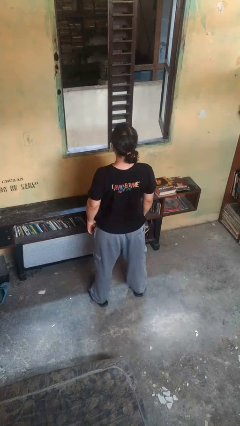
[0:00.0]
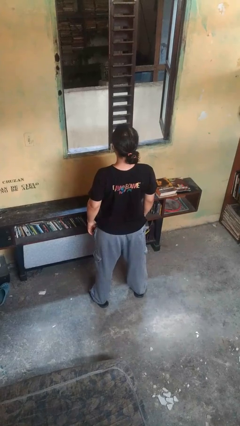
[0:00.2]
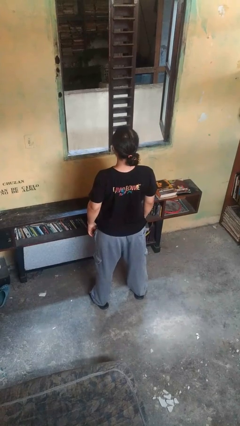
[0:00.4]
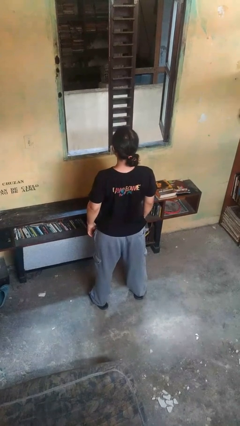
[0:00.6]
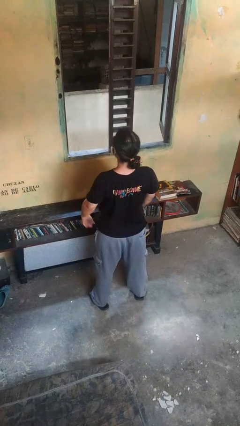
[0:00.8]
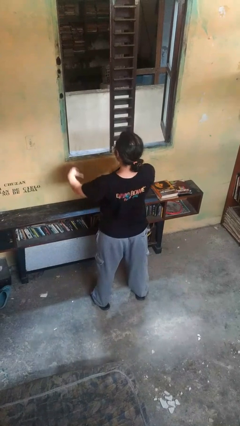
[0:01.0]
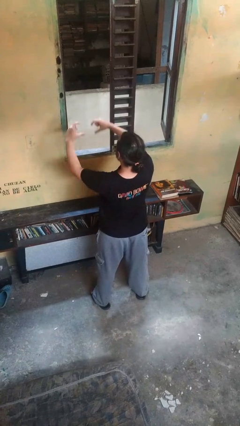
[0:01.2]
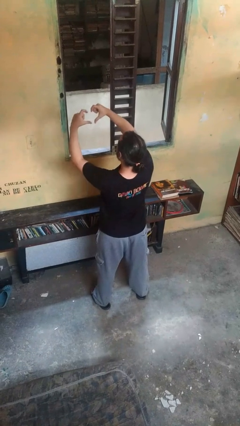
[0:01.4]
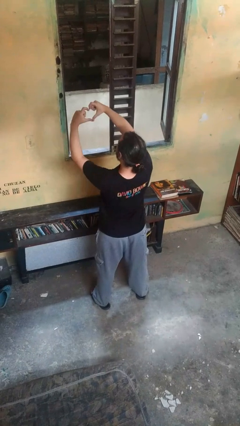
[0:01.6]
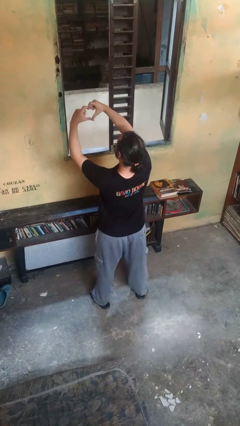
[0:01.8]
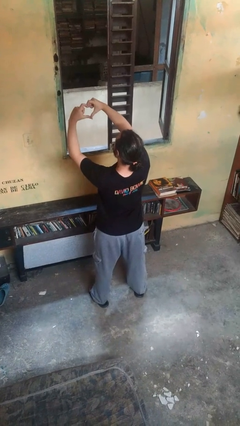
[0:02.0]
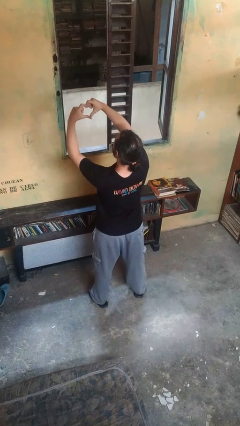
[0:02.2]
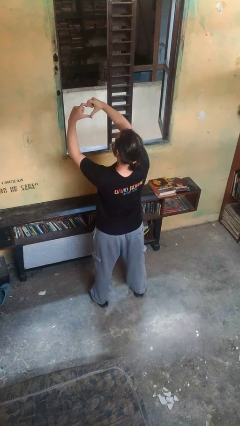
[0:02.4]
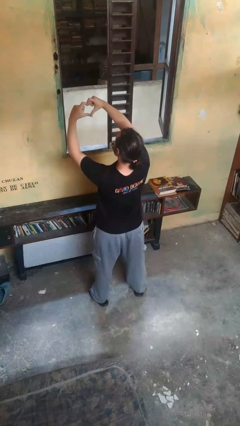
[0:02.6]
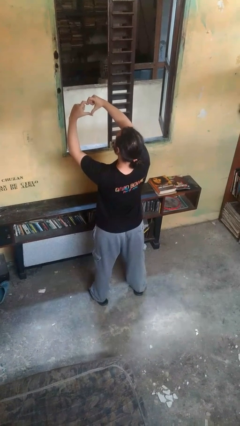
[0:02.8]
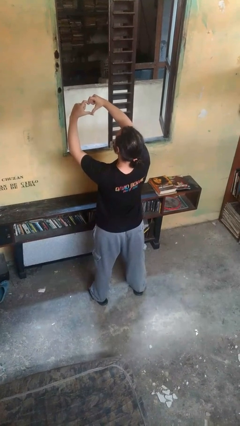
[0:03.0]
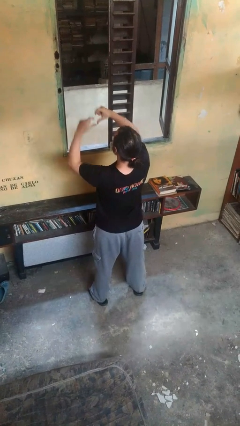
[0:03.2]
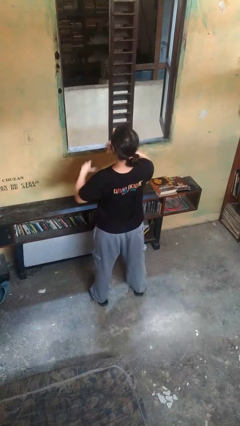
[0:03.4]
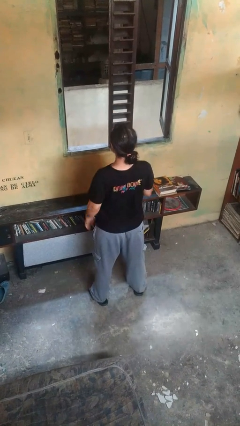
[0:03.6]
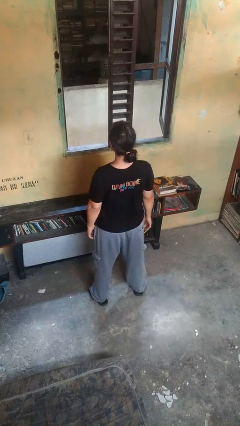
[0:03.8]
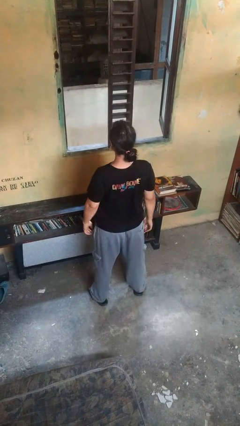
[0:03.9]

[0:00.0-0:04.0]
person gestures heart

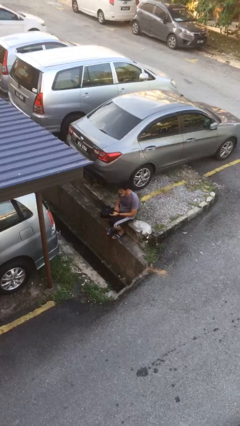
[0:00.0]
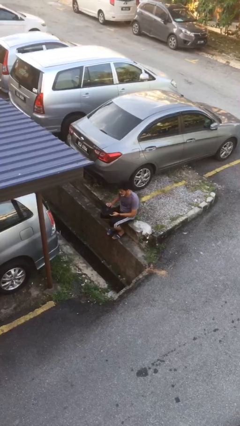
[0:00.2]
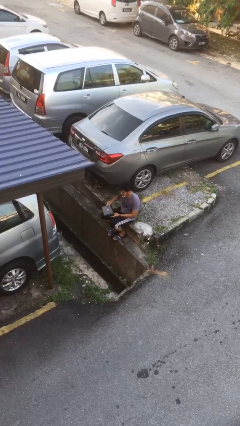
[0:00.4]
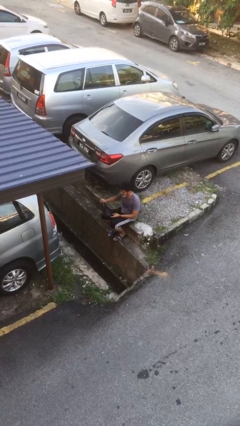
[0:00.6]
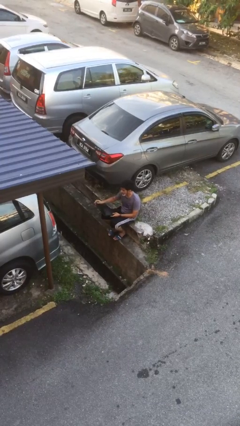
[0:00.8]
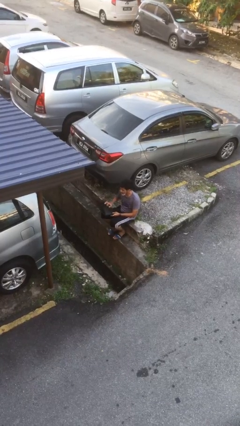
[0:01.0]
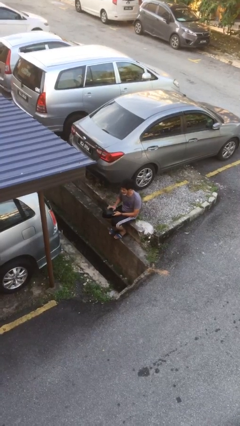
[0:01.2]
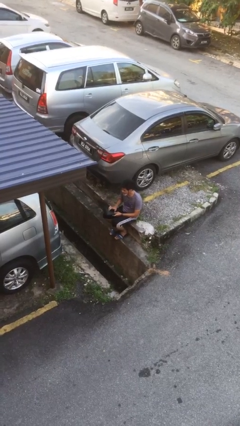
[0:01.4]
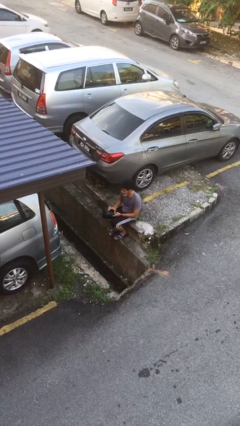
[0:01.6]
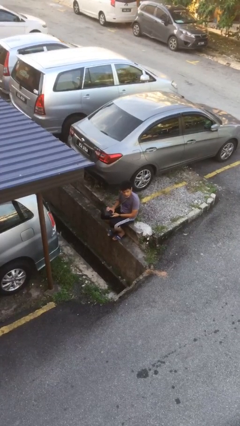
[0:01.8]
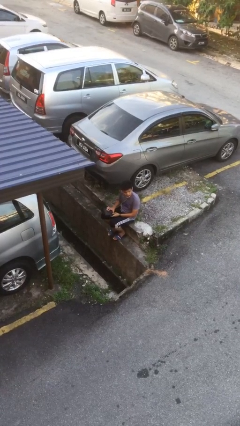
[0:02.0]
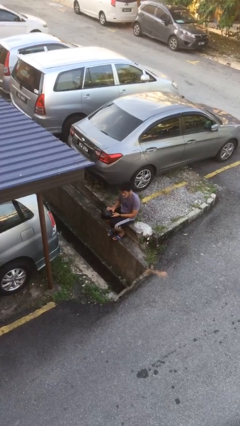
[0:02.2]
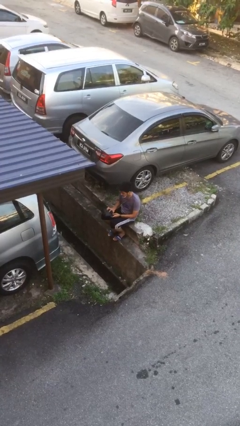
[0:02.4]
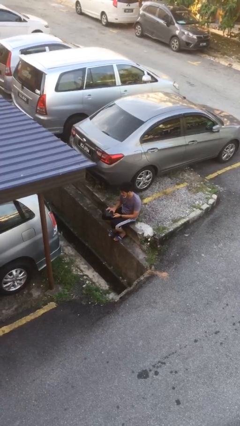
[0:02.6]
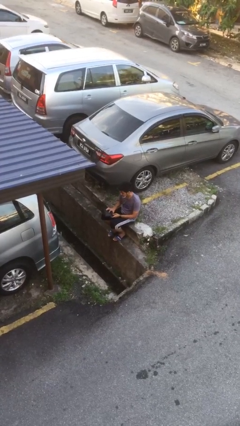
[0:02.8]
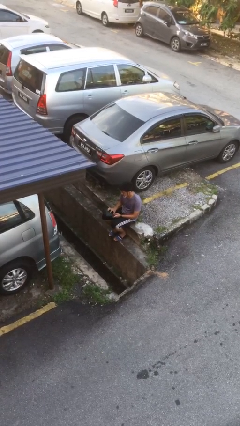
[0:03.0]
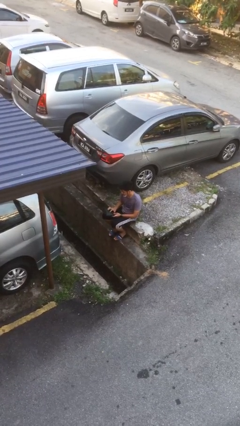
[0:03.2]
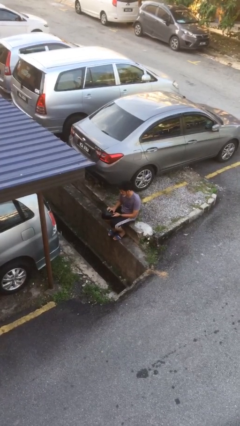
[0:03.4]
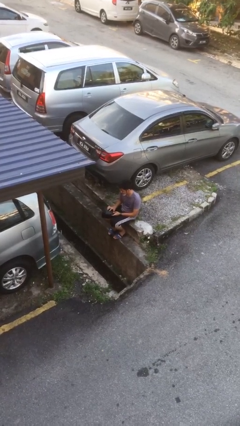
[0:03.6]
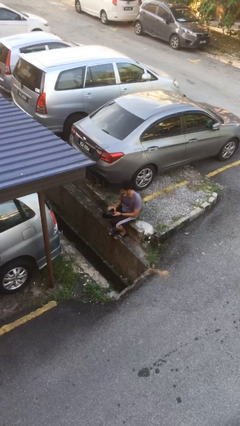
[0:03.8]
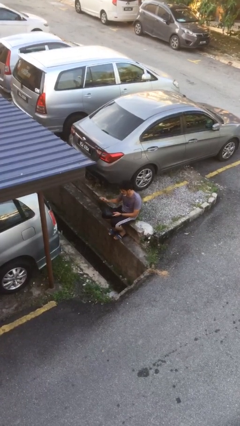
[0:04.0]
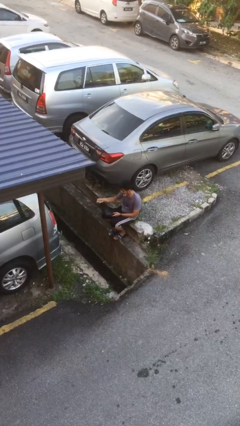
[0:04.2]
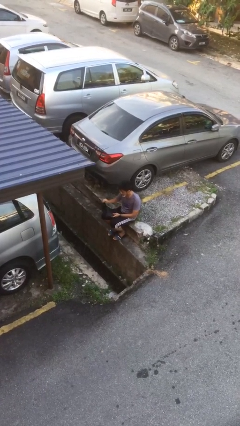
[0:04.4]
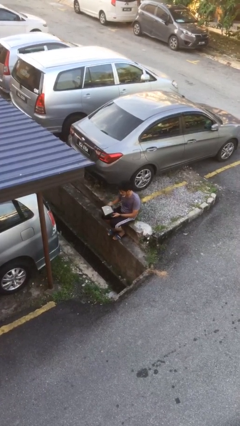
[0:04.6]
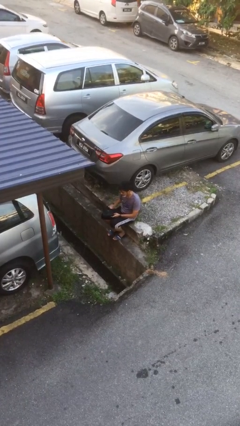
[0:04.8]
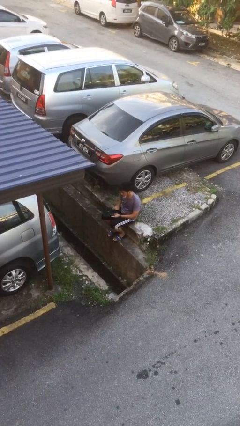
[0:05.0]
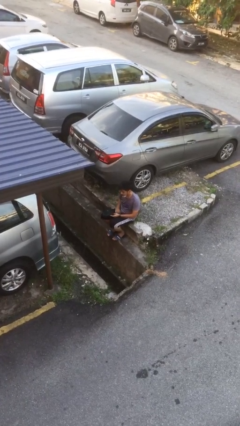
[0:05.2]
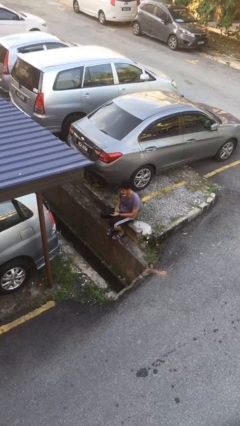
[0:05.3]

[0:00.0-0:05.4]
person interacts with laptop

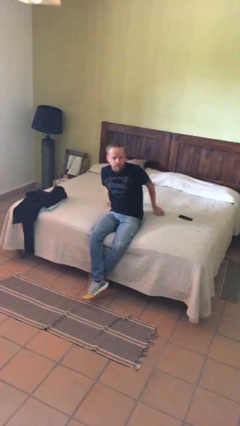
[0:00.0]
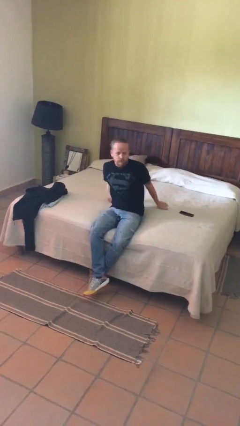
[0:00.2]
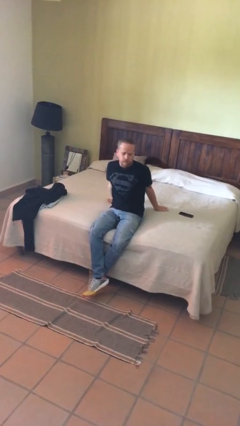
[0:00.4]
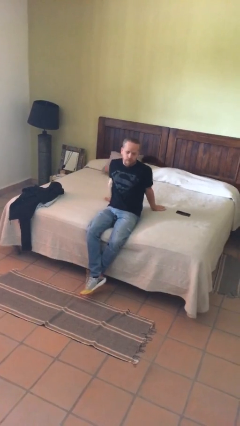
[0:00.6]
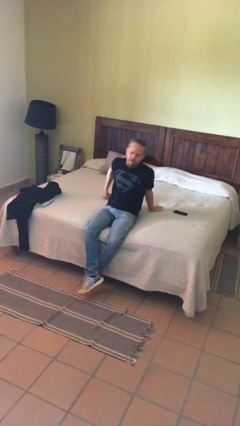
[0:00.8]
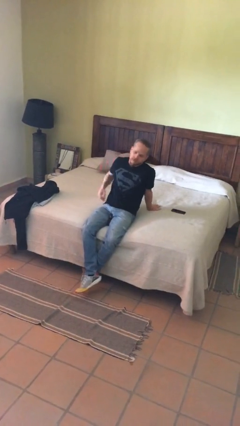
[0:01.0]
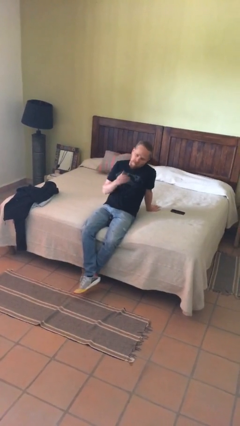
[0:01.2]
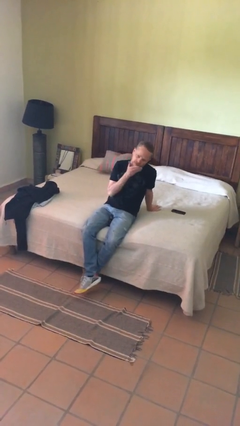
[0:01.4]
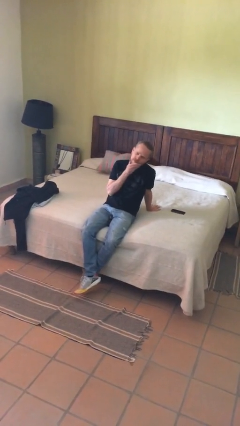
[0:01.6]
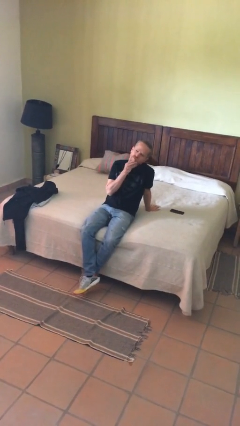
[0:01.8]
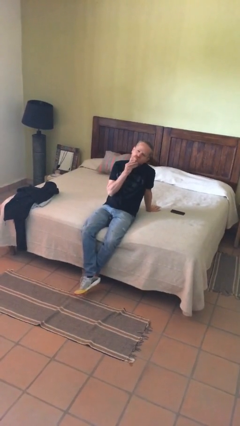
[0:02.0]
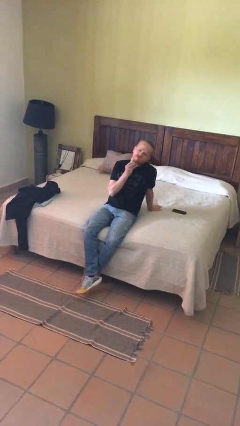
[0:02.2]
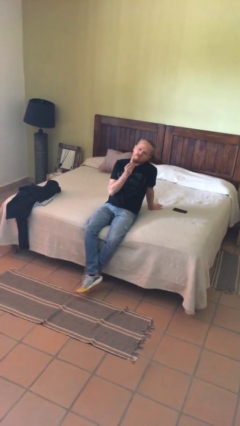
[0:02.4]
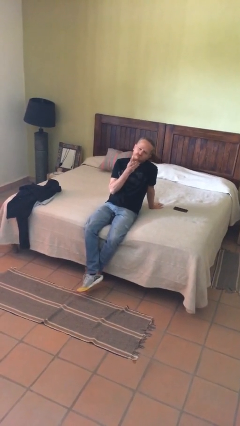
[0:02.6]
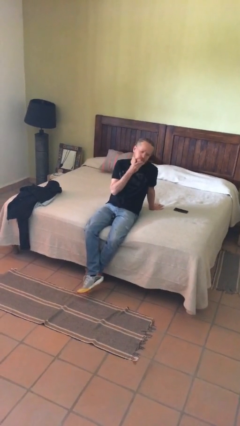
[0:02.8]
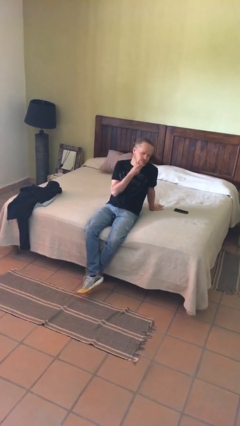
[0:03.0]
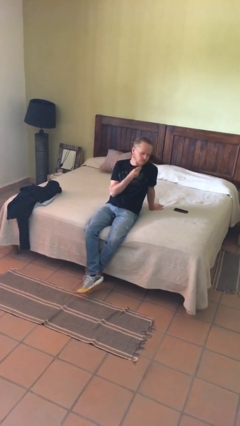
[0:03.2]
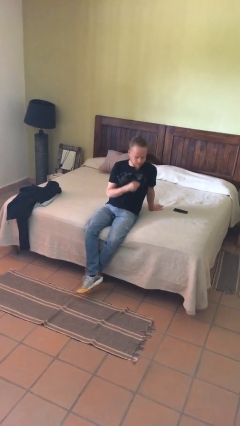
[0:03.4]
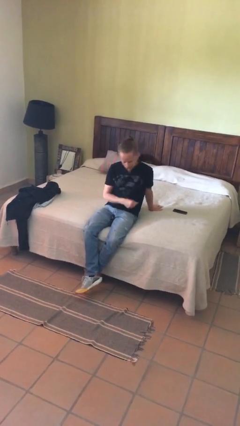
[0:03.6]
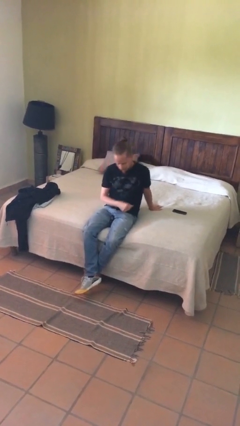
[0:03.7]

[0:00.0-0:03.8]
person strokes chin

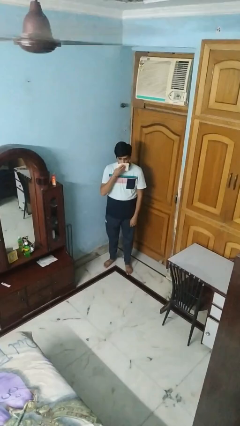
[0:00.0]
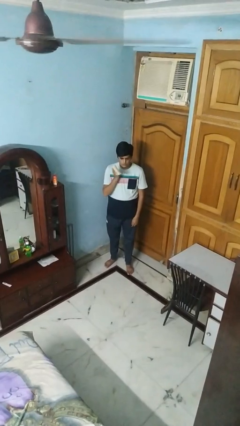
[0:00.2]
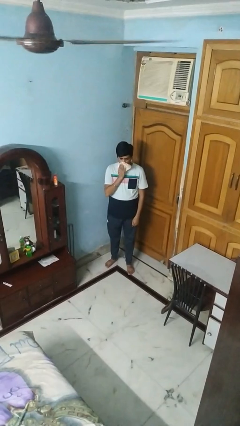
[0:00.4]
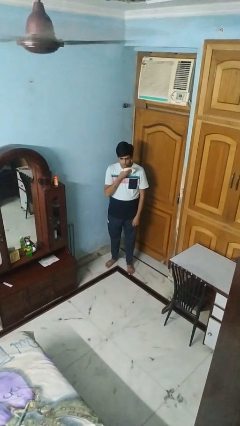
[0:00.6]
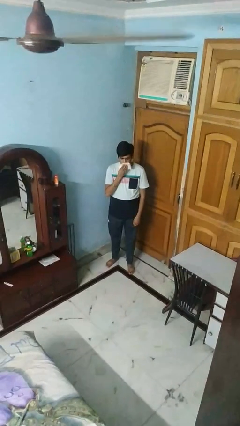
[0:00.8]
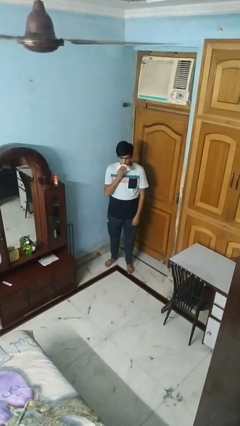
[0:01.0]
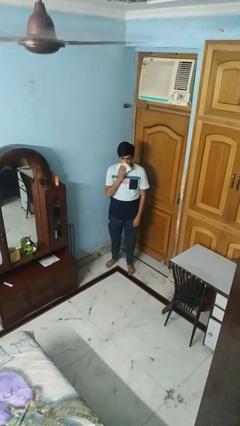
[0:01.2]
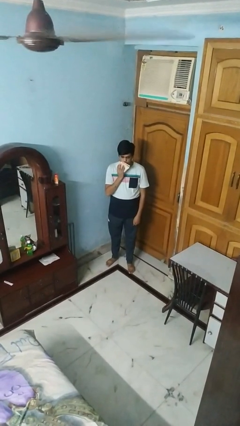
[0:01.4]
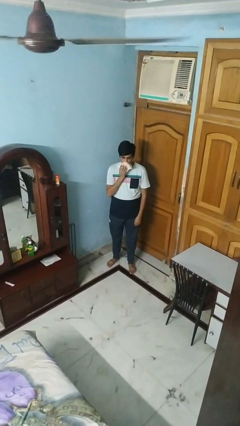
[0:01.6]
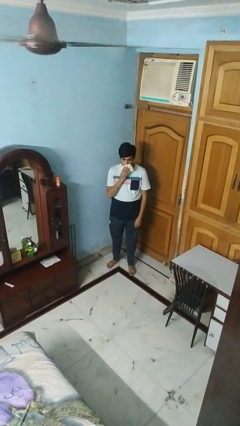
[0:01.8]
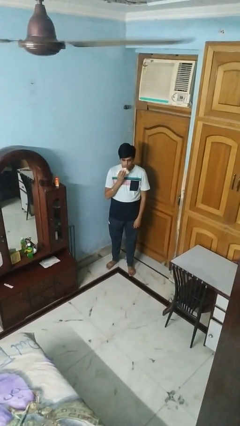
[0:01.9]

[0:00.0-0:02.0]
person wipes mouth with napkin

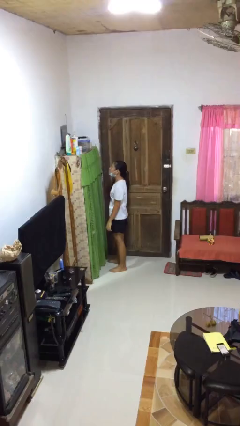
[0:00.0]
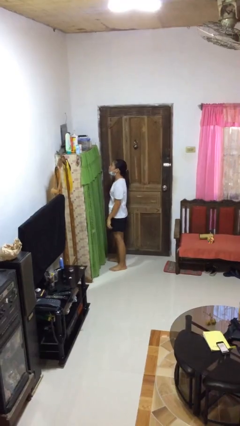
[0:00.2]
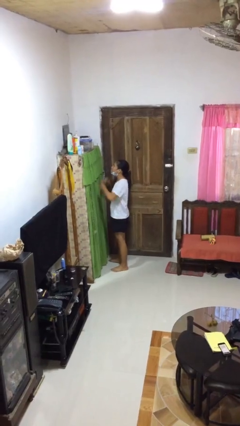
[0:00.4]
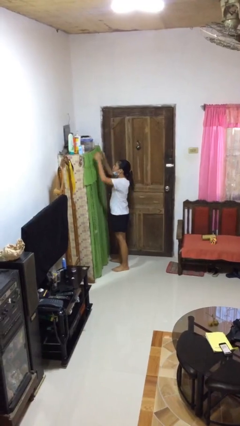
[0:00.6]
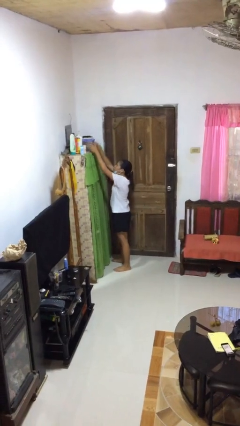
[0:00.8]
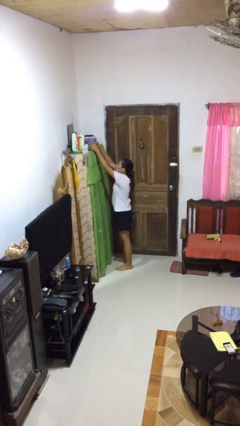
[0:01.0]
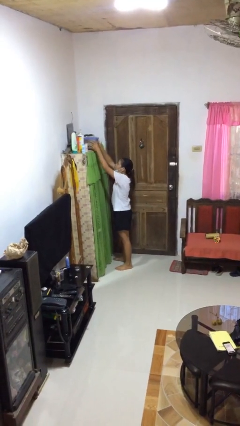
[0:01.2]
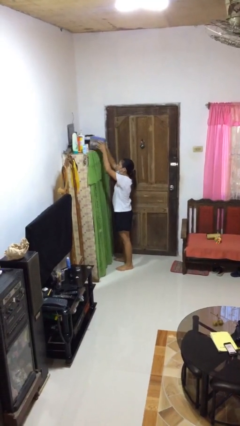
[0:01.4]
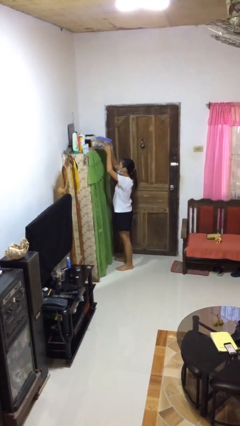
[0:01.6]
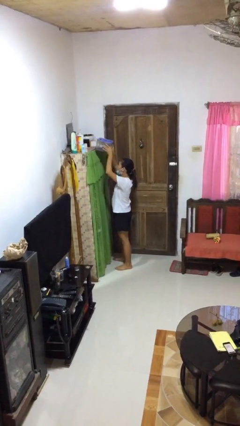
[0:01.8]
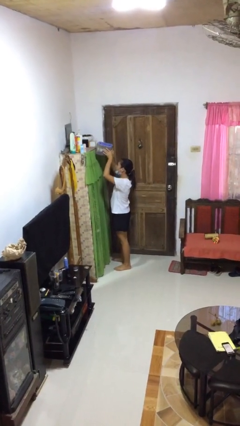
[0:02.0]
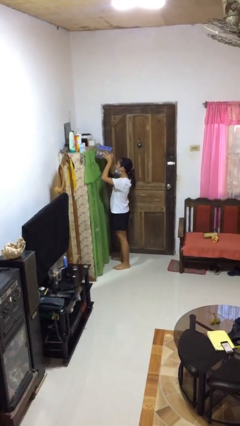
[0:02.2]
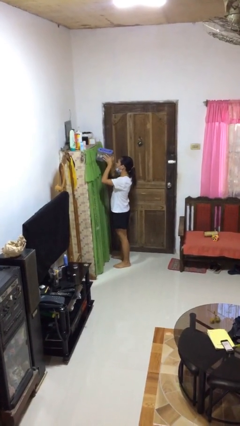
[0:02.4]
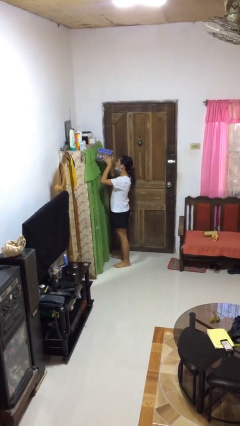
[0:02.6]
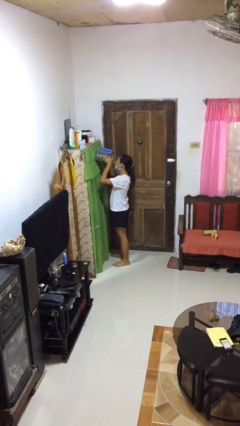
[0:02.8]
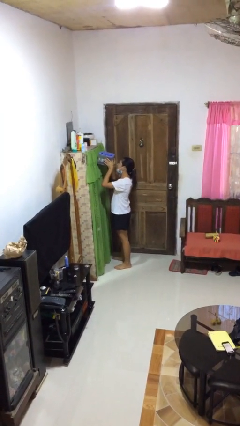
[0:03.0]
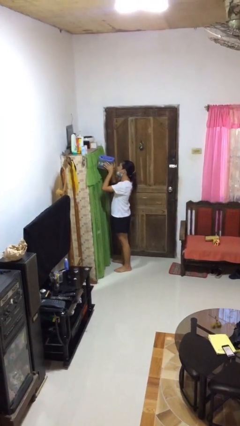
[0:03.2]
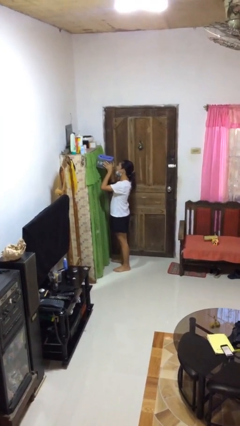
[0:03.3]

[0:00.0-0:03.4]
person picks up object from shelf
